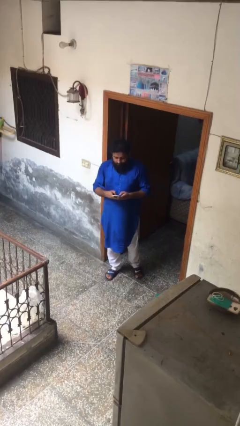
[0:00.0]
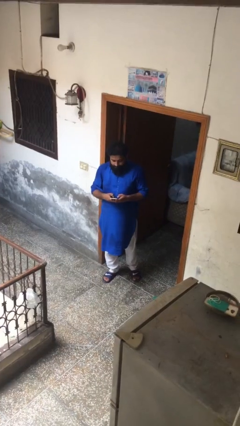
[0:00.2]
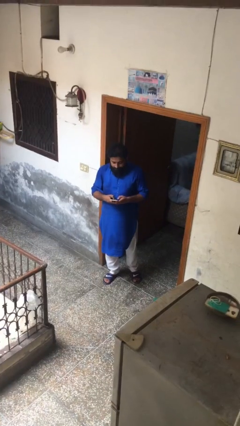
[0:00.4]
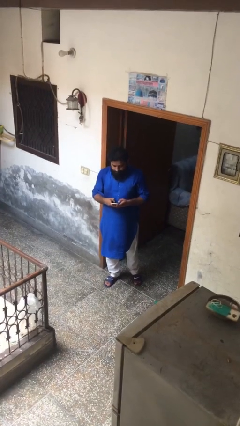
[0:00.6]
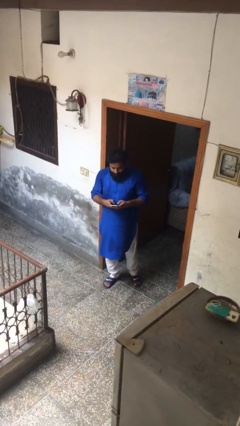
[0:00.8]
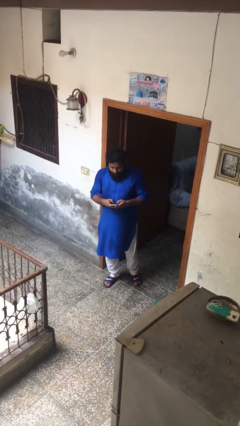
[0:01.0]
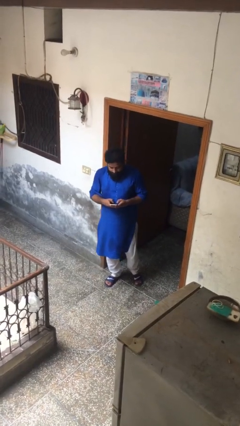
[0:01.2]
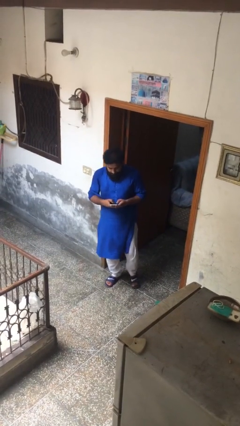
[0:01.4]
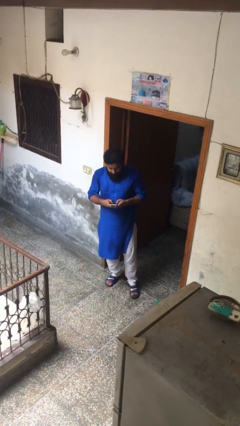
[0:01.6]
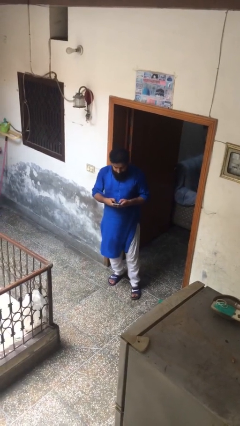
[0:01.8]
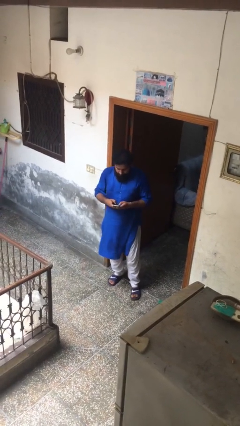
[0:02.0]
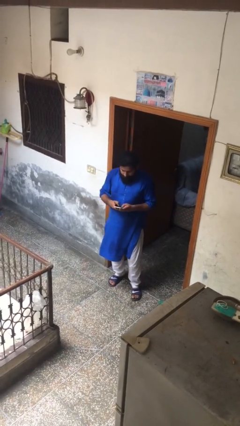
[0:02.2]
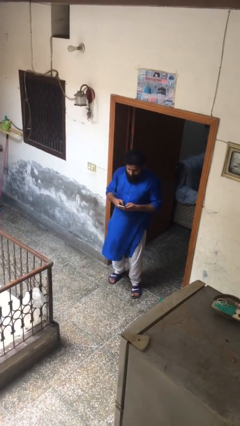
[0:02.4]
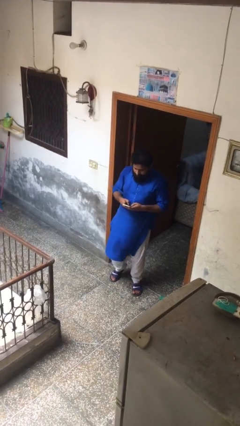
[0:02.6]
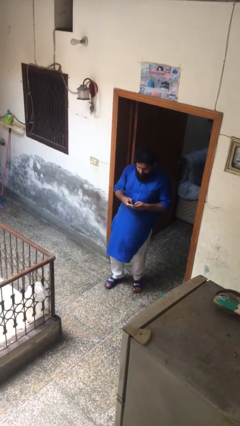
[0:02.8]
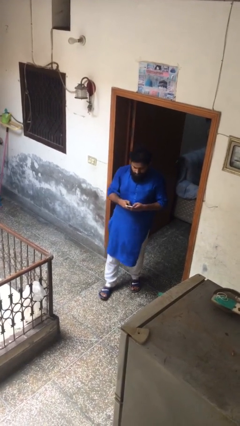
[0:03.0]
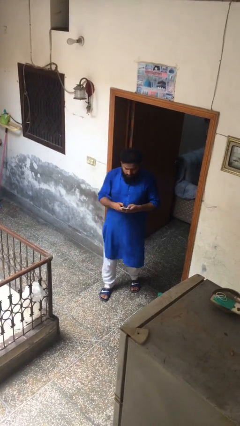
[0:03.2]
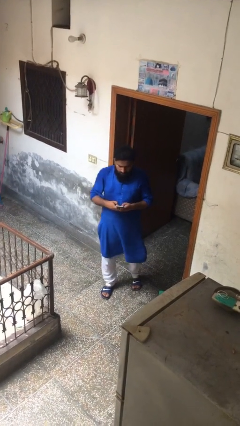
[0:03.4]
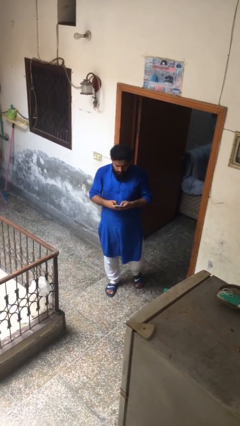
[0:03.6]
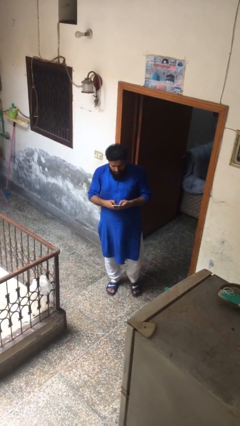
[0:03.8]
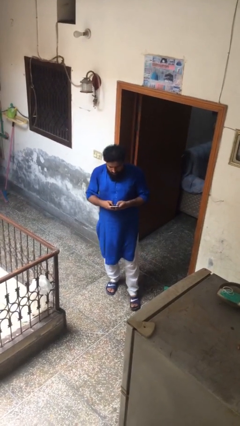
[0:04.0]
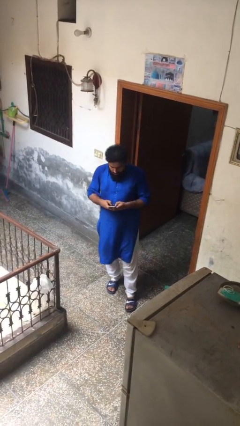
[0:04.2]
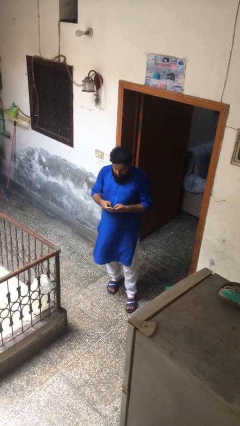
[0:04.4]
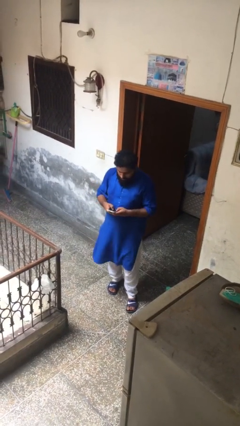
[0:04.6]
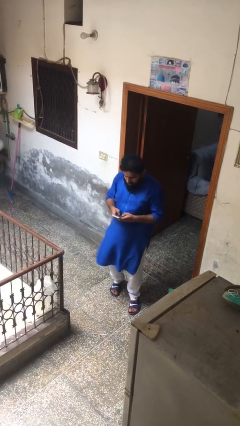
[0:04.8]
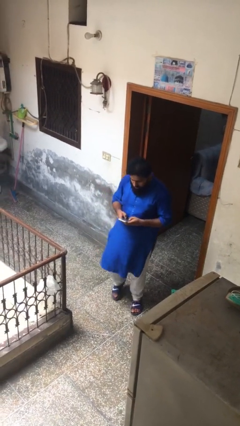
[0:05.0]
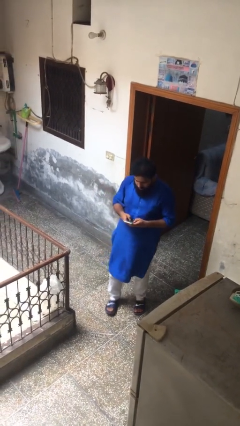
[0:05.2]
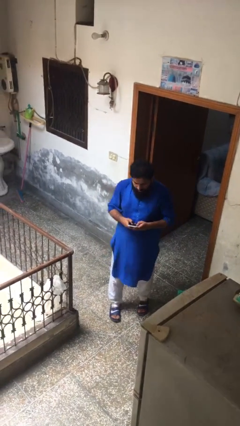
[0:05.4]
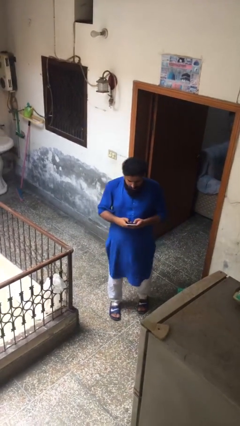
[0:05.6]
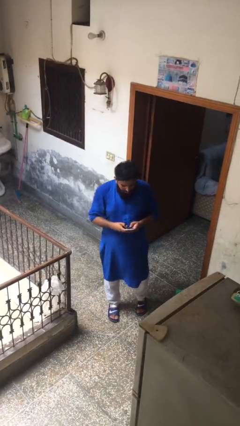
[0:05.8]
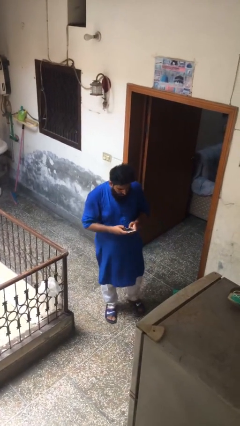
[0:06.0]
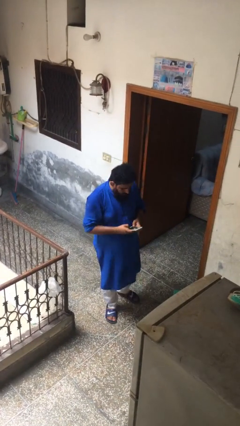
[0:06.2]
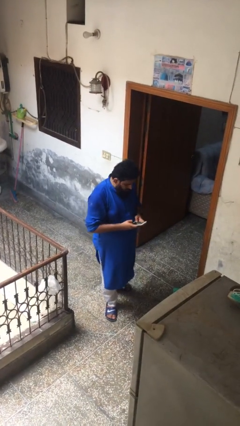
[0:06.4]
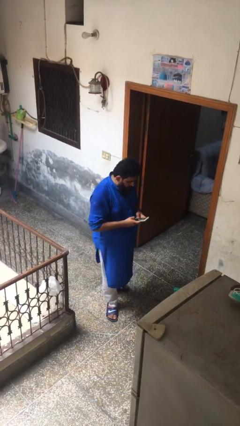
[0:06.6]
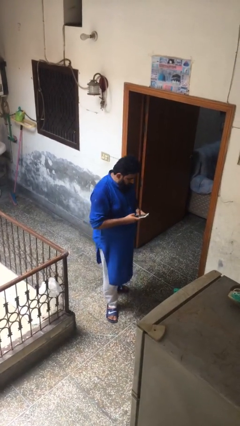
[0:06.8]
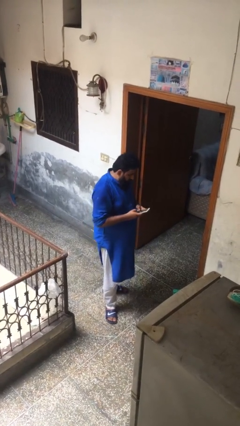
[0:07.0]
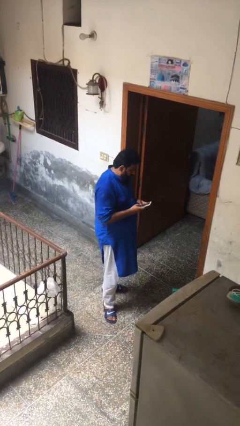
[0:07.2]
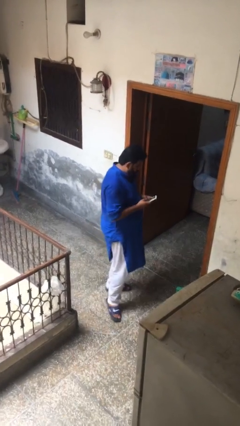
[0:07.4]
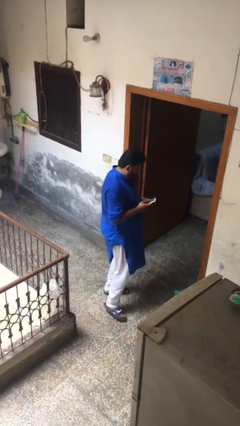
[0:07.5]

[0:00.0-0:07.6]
person texts on phone

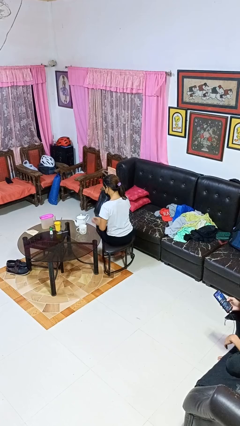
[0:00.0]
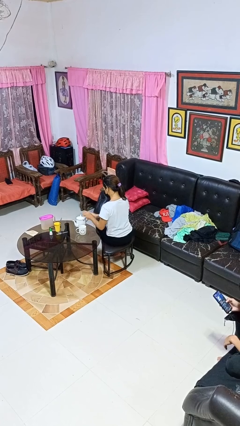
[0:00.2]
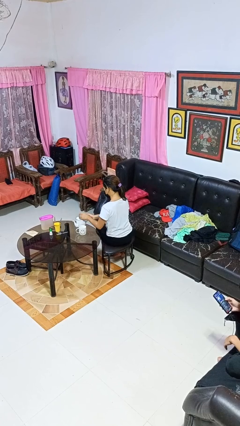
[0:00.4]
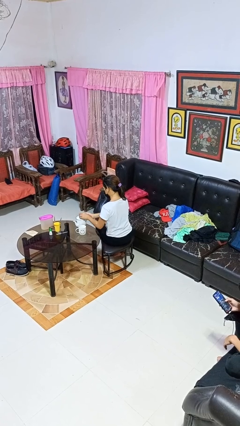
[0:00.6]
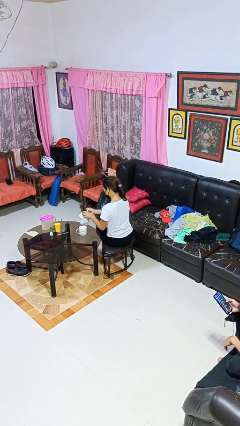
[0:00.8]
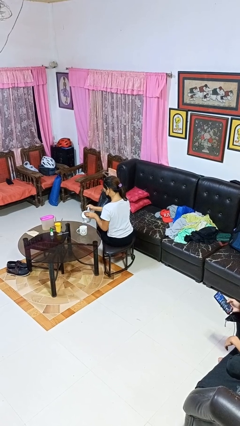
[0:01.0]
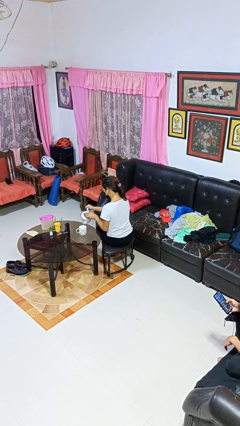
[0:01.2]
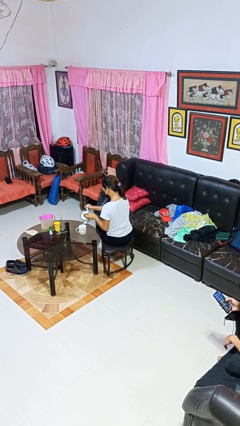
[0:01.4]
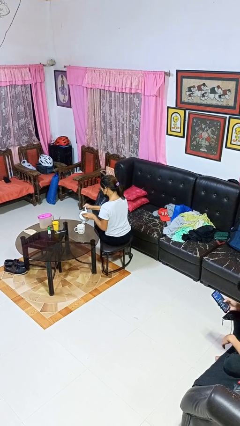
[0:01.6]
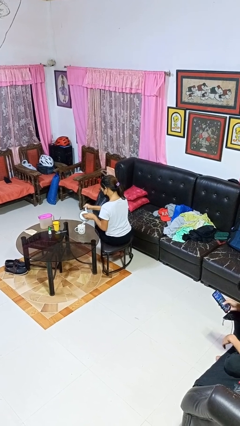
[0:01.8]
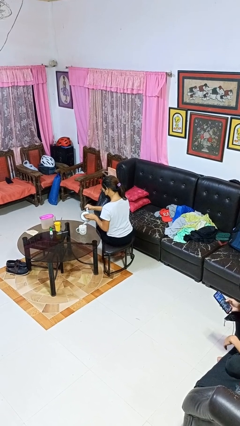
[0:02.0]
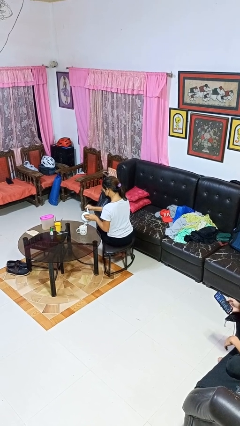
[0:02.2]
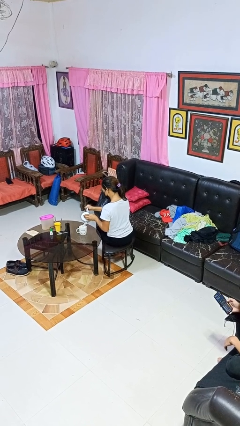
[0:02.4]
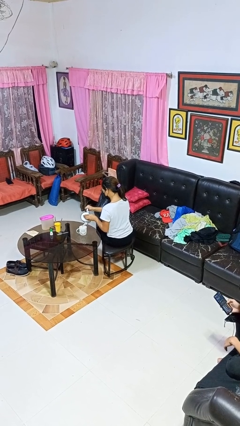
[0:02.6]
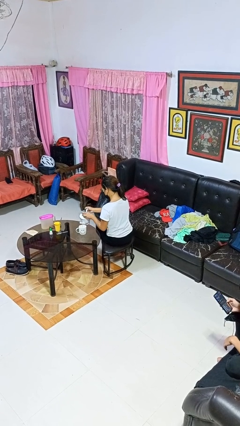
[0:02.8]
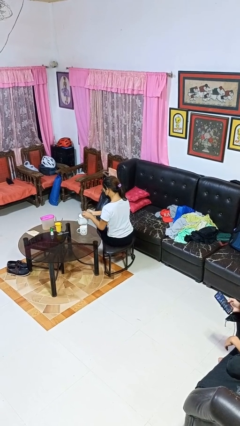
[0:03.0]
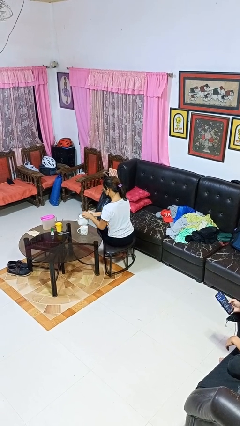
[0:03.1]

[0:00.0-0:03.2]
person pours coffee into mug

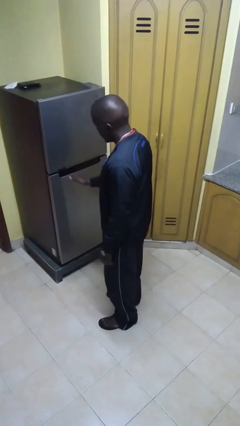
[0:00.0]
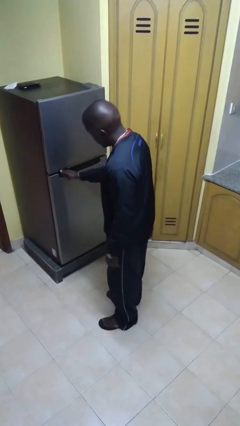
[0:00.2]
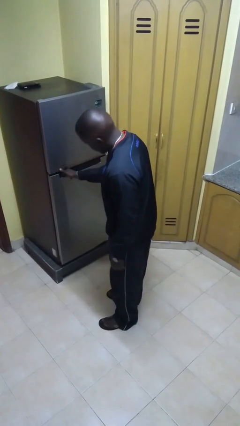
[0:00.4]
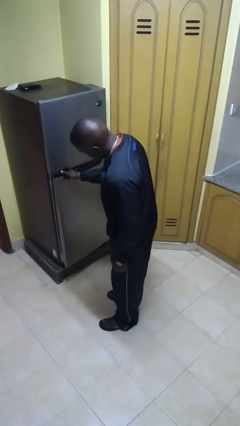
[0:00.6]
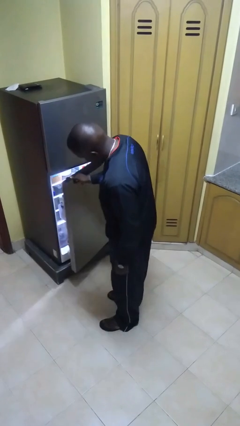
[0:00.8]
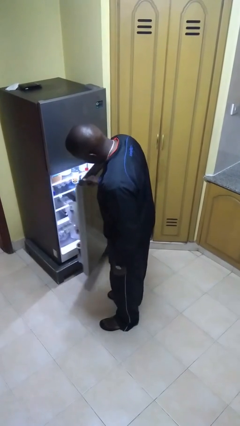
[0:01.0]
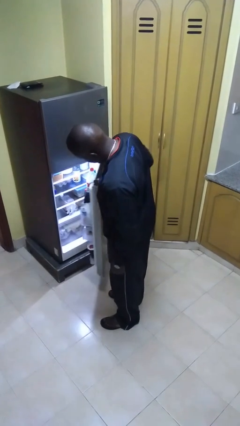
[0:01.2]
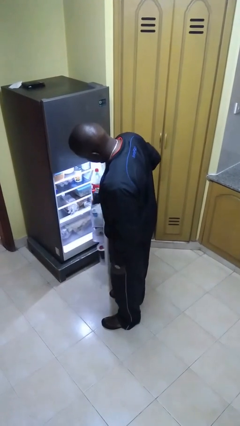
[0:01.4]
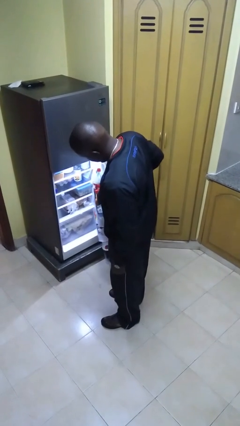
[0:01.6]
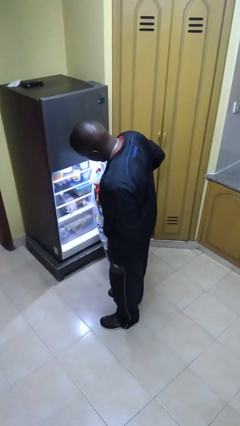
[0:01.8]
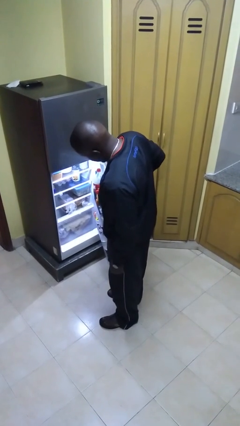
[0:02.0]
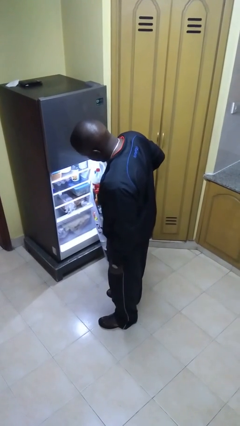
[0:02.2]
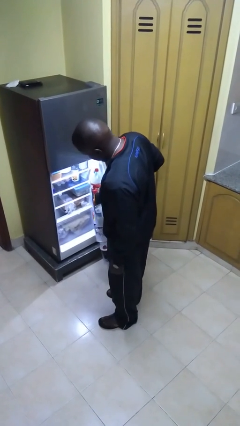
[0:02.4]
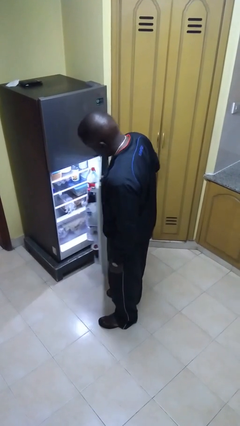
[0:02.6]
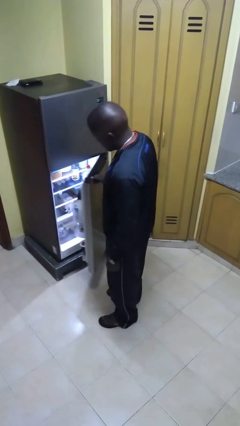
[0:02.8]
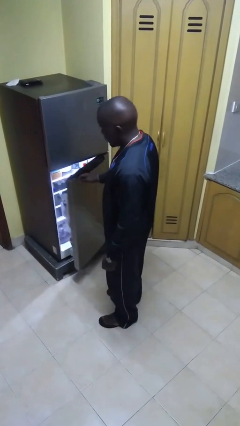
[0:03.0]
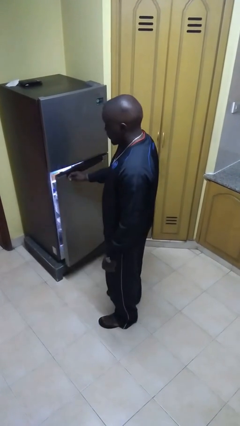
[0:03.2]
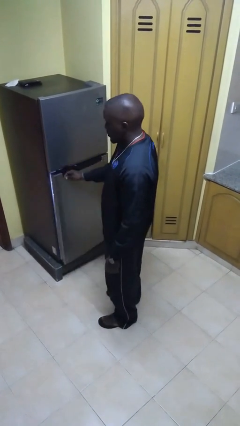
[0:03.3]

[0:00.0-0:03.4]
person dries hands with towel

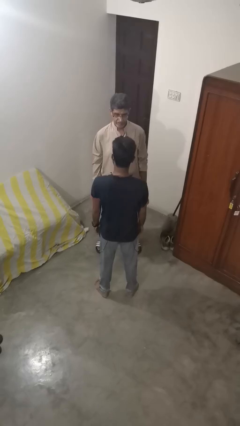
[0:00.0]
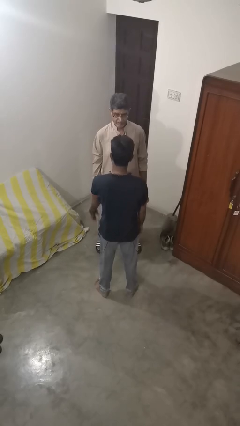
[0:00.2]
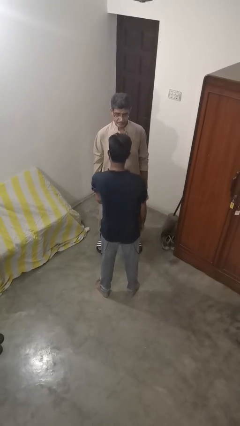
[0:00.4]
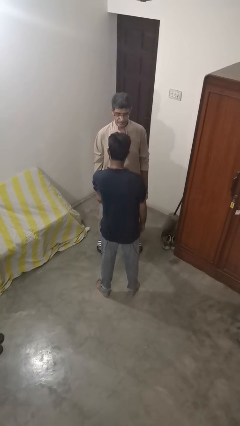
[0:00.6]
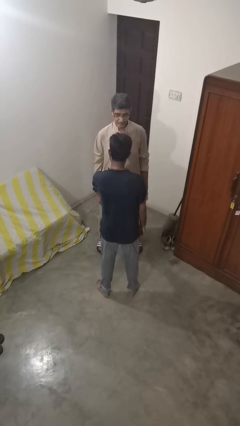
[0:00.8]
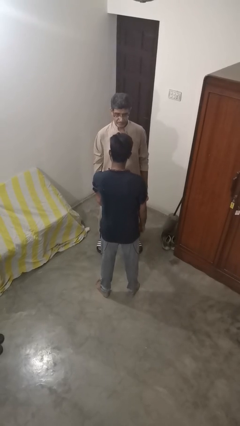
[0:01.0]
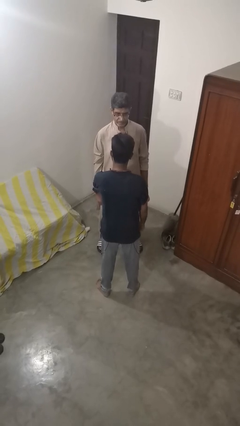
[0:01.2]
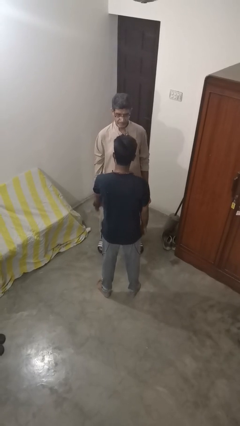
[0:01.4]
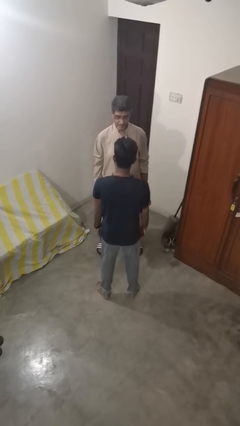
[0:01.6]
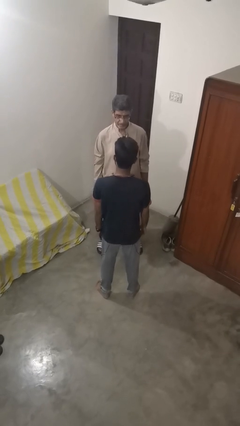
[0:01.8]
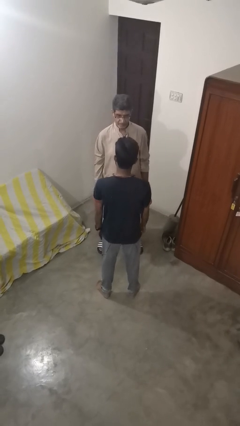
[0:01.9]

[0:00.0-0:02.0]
person grabs person by forearm

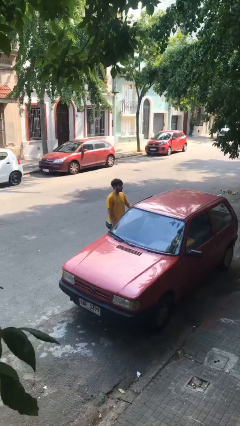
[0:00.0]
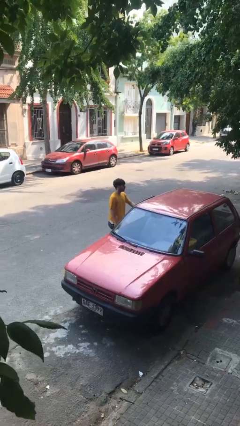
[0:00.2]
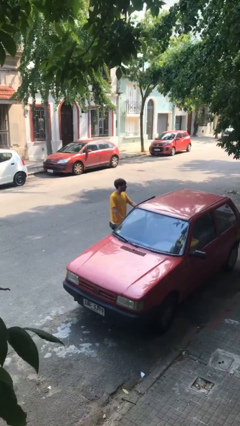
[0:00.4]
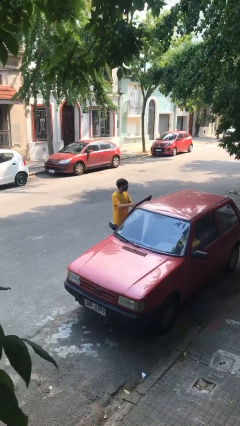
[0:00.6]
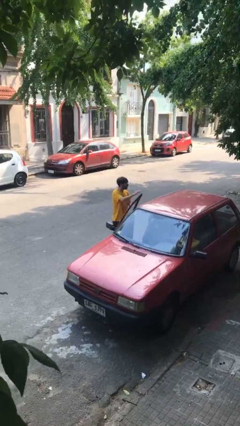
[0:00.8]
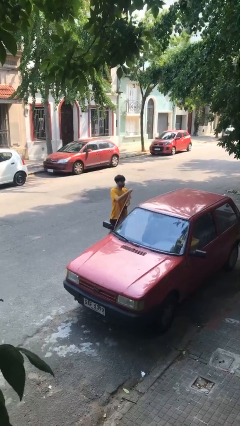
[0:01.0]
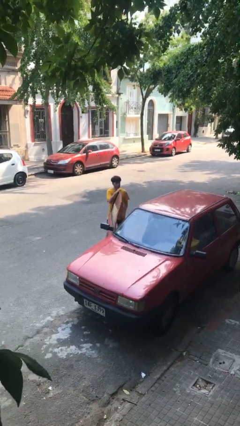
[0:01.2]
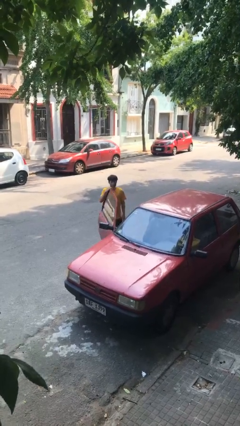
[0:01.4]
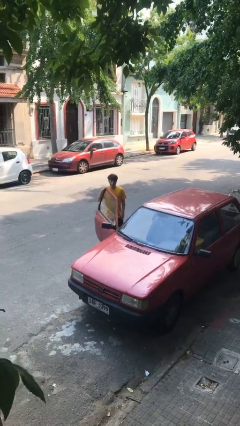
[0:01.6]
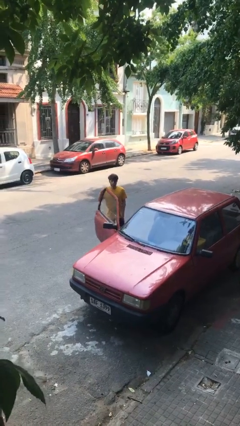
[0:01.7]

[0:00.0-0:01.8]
person opens car door
